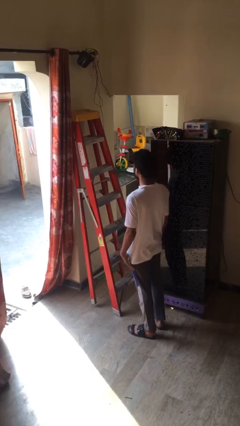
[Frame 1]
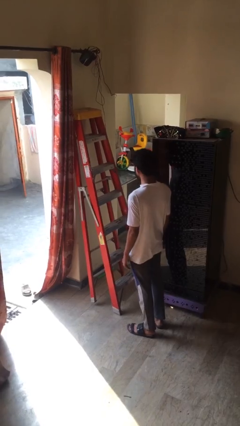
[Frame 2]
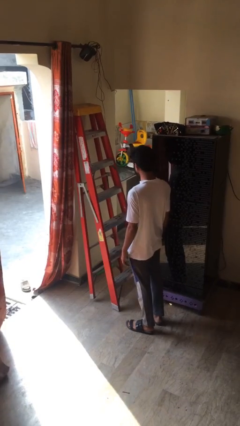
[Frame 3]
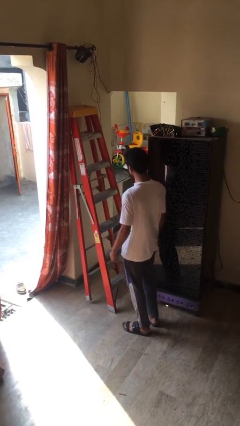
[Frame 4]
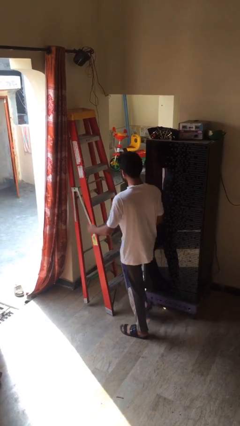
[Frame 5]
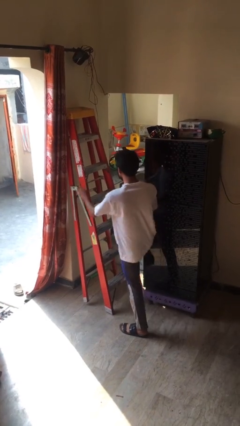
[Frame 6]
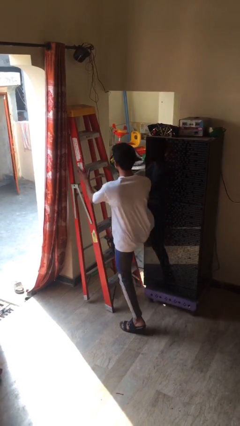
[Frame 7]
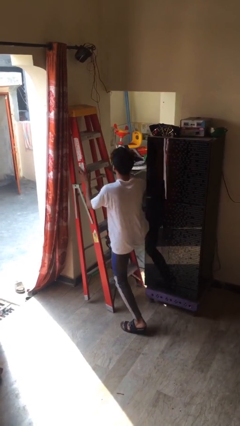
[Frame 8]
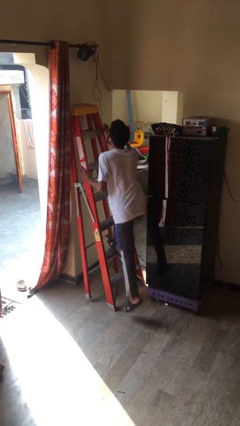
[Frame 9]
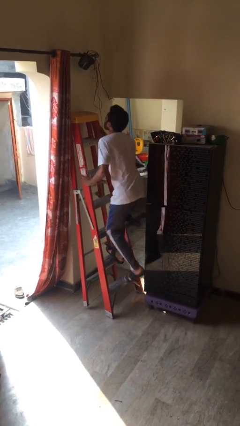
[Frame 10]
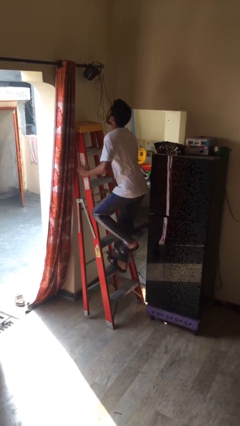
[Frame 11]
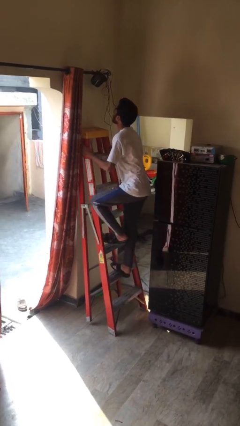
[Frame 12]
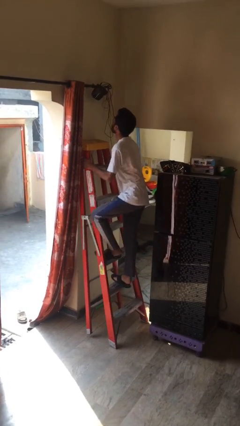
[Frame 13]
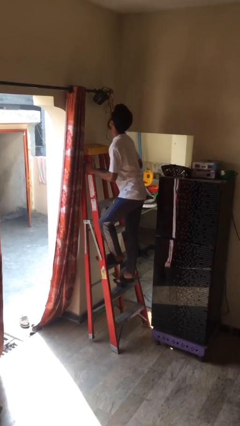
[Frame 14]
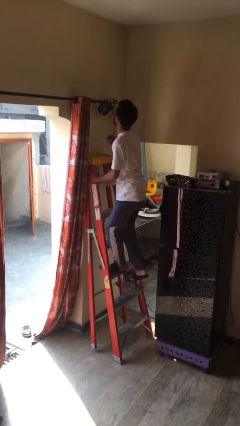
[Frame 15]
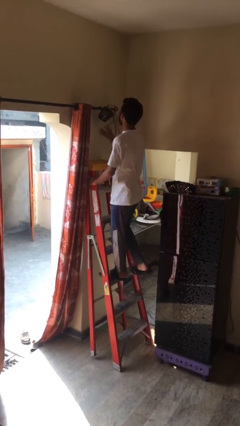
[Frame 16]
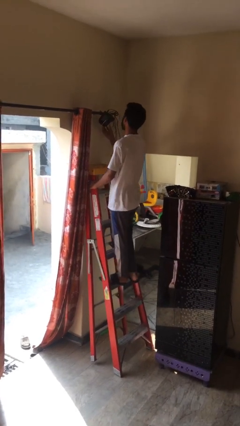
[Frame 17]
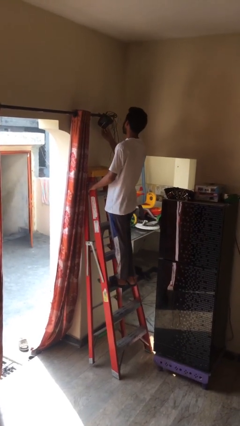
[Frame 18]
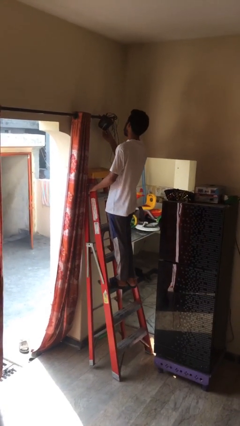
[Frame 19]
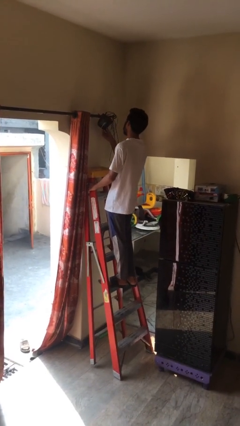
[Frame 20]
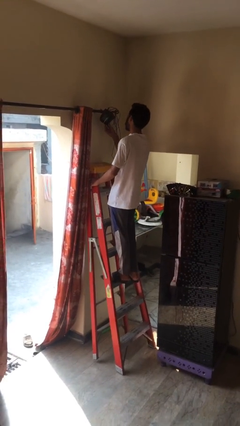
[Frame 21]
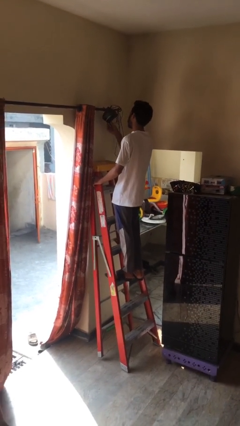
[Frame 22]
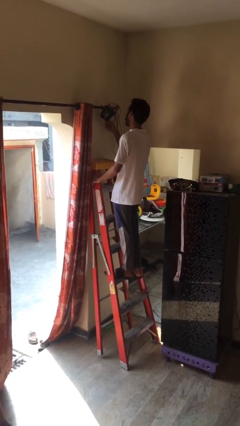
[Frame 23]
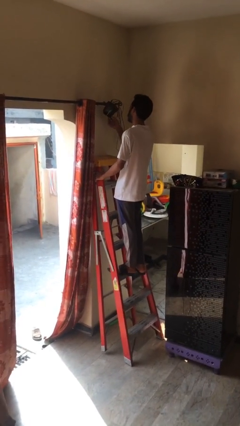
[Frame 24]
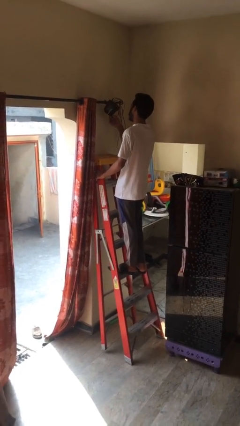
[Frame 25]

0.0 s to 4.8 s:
person climbs up ladder

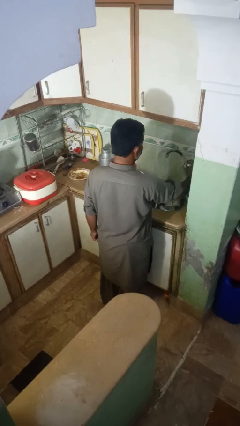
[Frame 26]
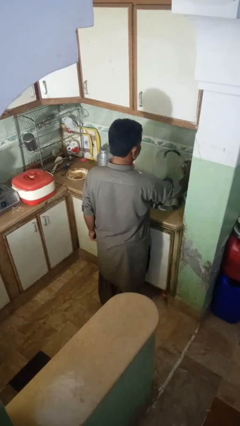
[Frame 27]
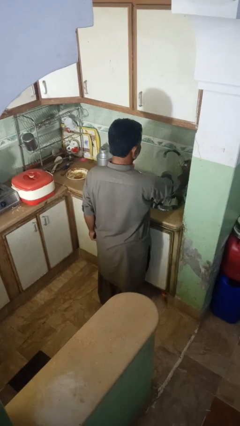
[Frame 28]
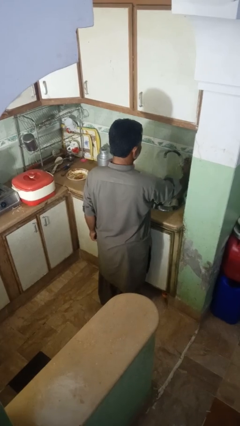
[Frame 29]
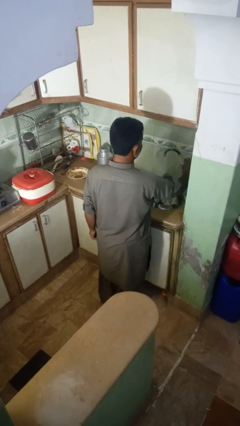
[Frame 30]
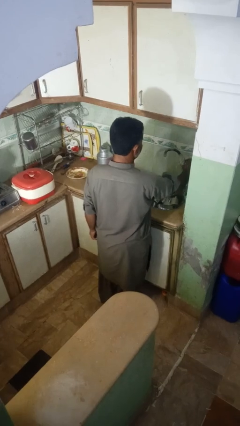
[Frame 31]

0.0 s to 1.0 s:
person turns off faucet

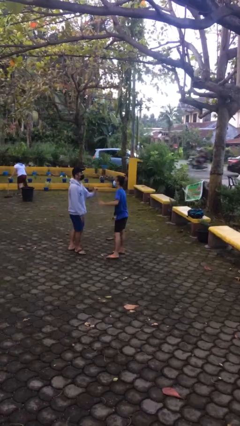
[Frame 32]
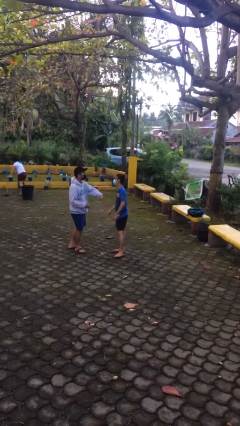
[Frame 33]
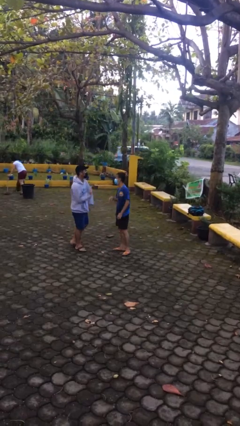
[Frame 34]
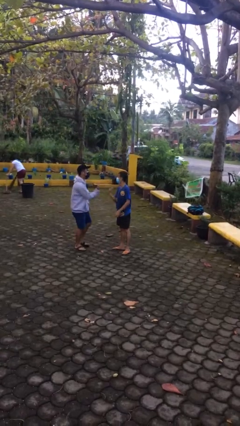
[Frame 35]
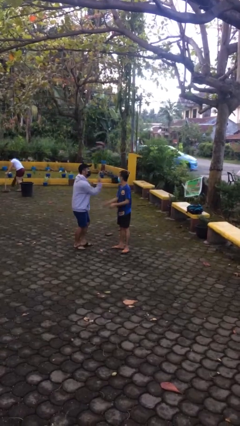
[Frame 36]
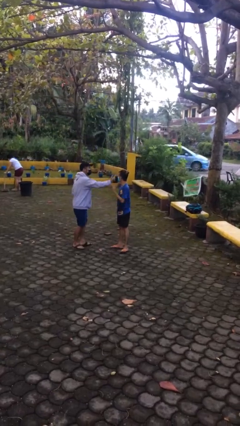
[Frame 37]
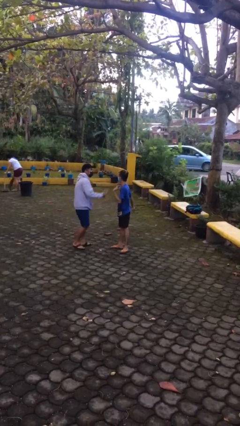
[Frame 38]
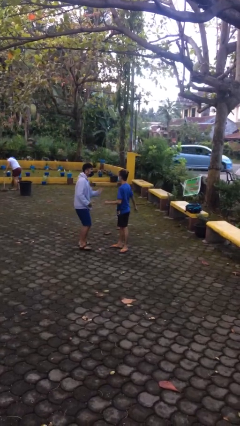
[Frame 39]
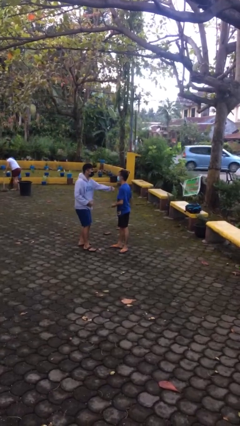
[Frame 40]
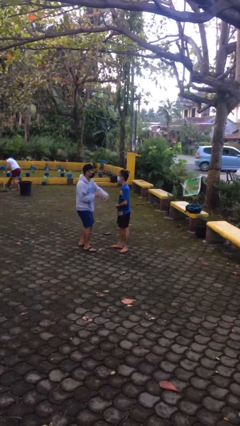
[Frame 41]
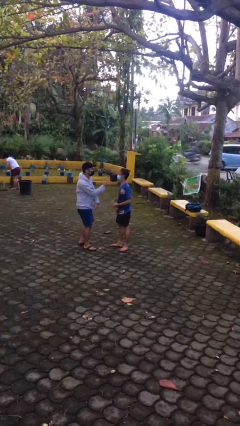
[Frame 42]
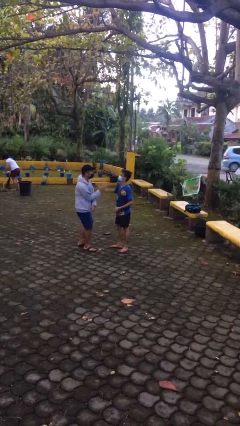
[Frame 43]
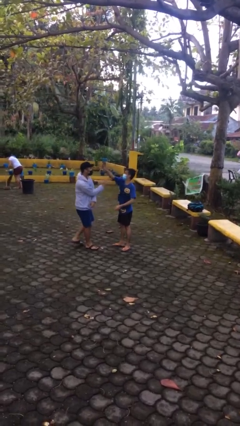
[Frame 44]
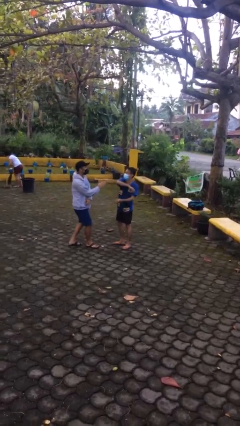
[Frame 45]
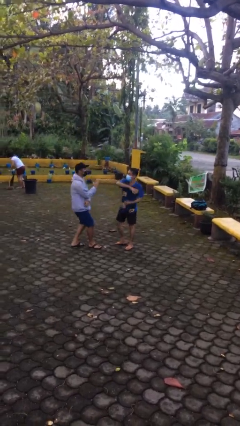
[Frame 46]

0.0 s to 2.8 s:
person talks to person

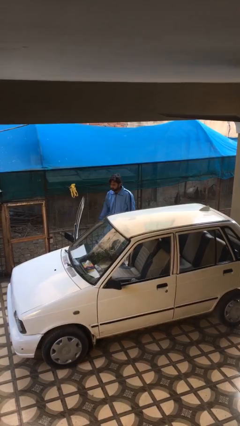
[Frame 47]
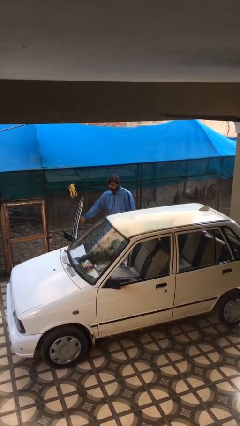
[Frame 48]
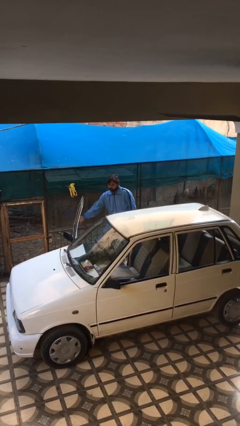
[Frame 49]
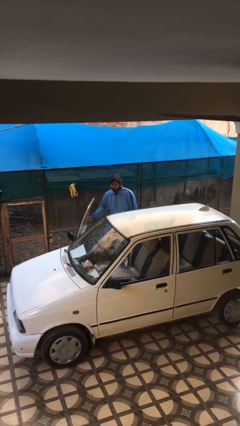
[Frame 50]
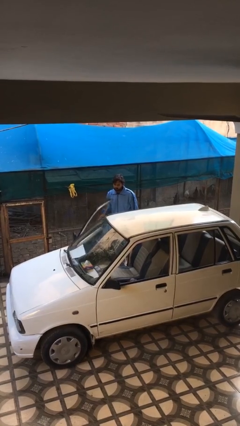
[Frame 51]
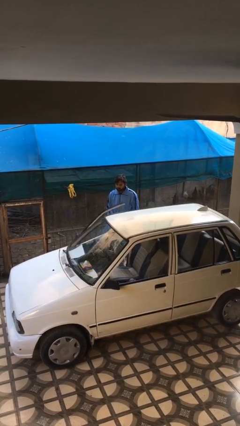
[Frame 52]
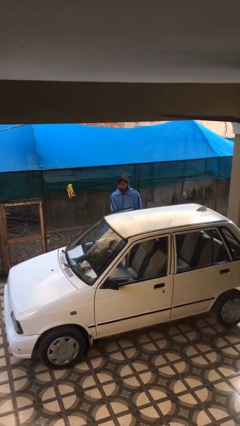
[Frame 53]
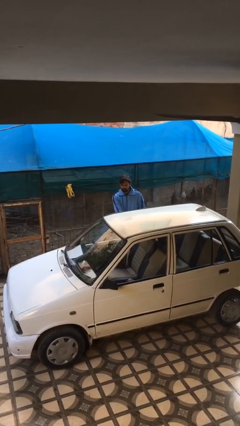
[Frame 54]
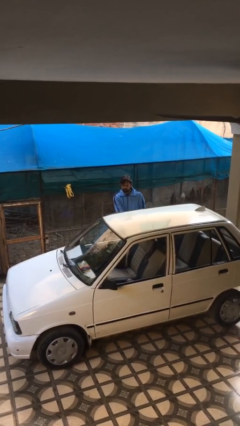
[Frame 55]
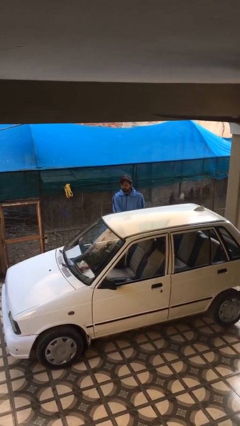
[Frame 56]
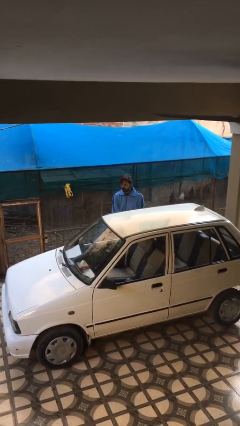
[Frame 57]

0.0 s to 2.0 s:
person closes car door

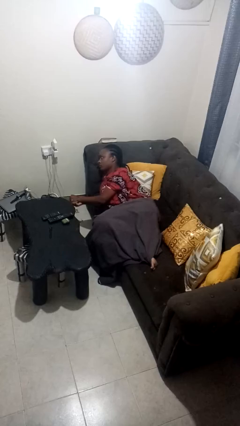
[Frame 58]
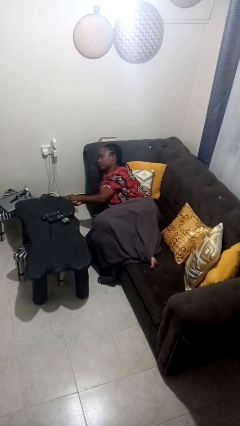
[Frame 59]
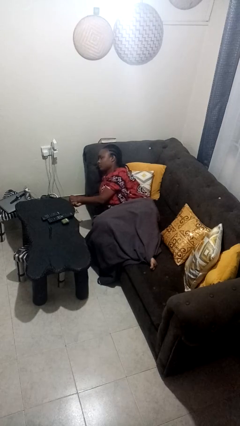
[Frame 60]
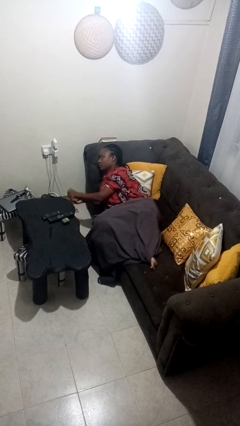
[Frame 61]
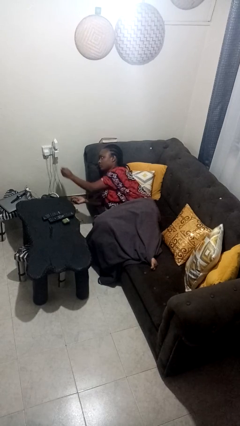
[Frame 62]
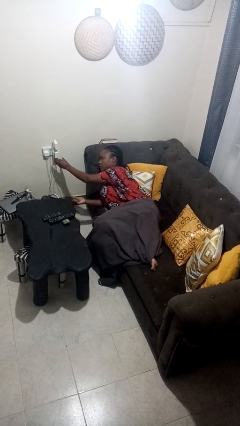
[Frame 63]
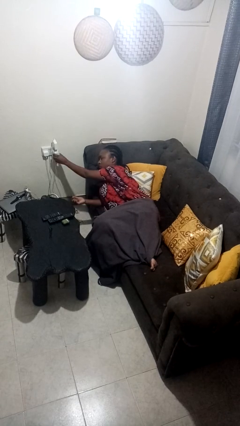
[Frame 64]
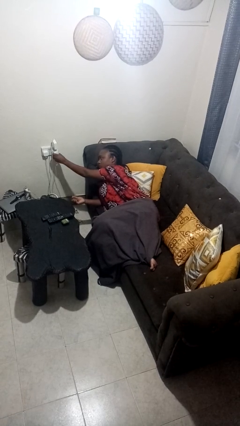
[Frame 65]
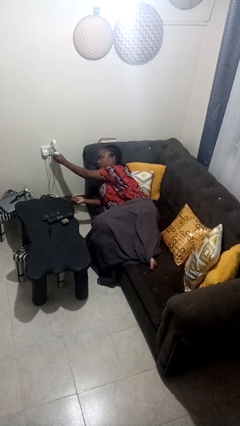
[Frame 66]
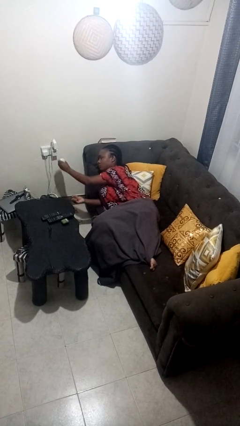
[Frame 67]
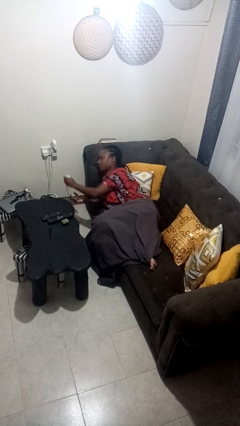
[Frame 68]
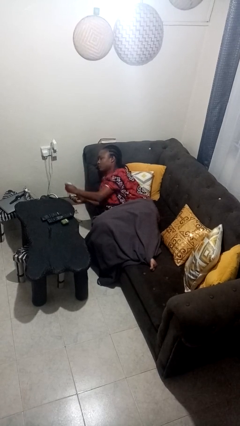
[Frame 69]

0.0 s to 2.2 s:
person unplugs from electrical socket

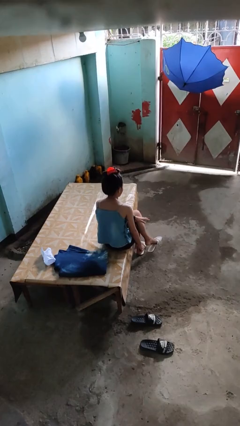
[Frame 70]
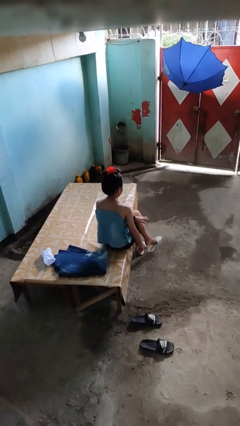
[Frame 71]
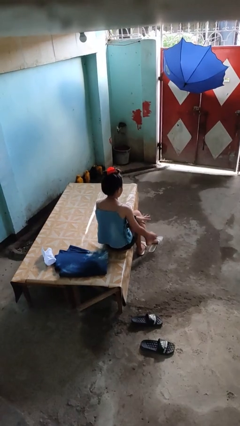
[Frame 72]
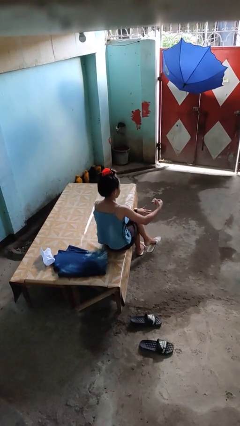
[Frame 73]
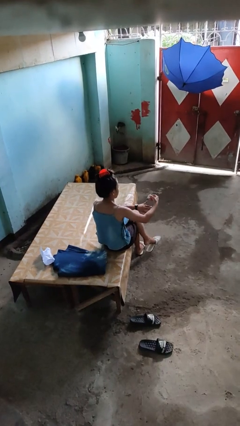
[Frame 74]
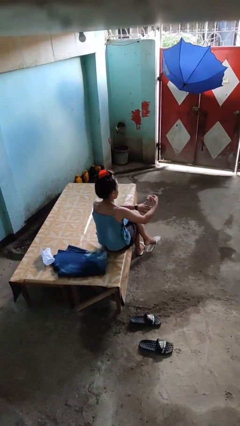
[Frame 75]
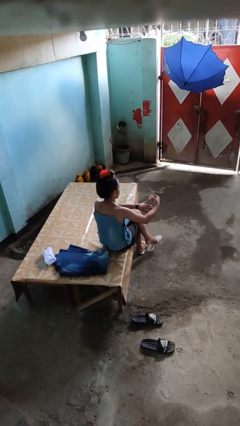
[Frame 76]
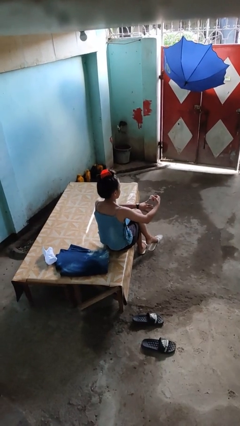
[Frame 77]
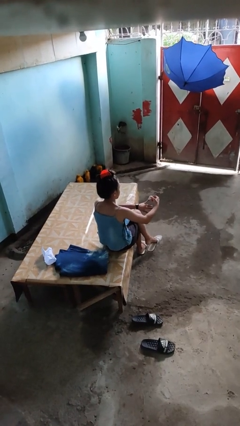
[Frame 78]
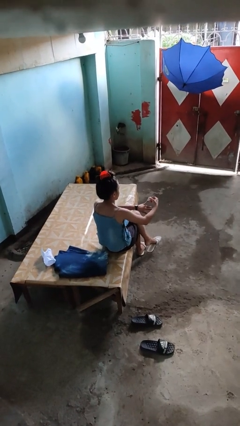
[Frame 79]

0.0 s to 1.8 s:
person clips fingernails

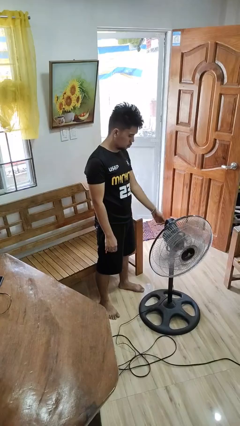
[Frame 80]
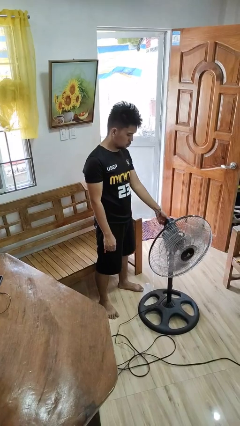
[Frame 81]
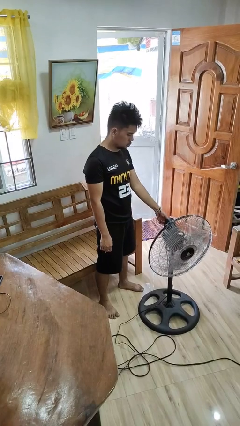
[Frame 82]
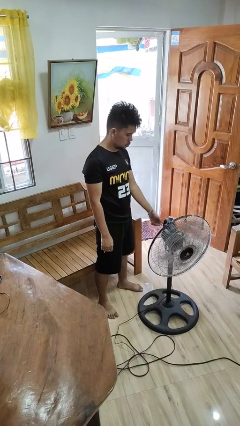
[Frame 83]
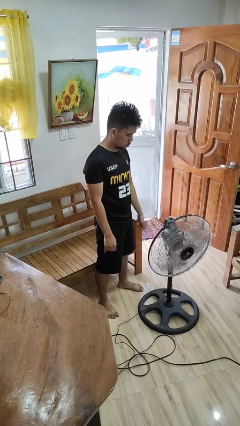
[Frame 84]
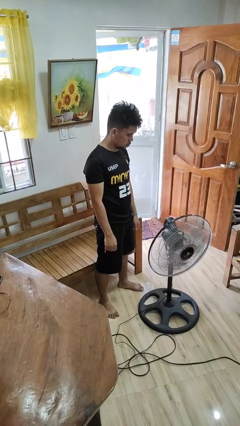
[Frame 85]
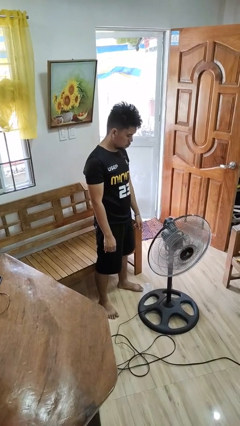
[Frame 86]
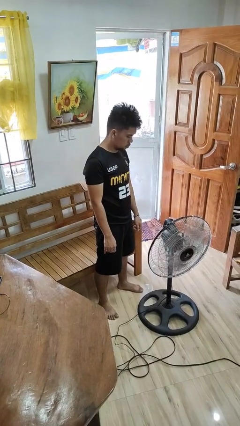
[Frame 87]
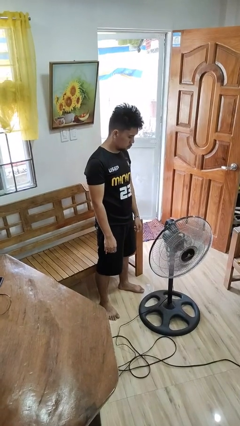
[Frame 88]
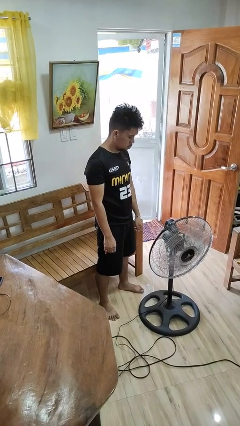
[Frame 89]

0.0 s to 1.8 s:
person turns on fan

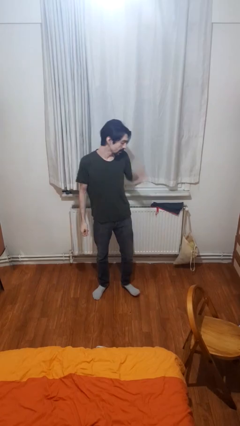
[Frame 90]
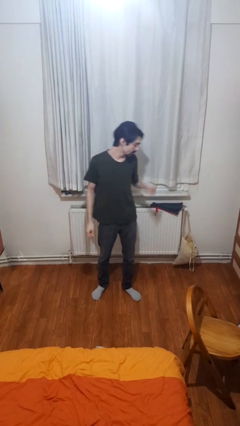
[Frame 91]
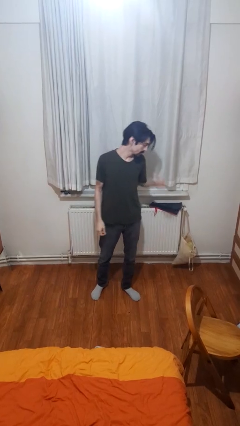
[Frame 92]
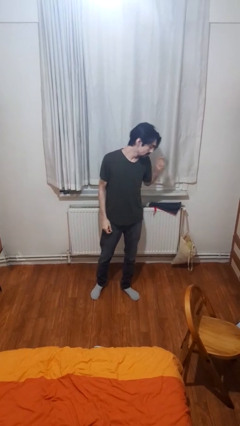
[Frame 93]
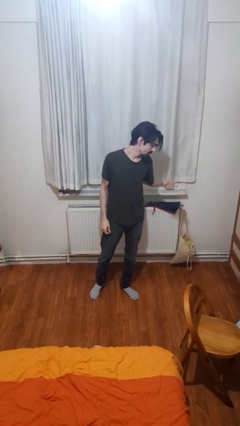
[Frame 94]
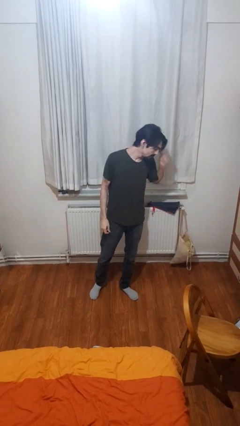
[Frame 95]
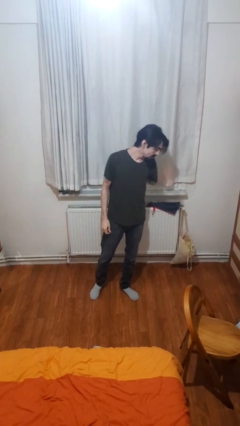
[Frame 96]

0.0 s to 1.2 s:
person snaps fingers
